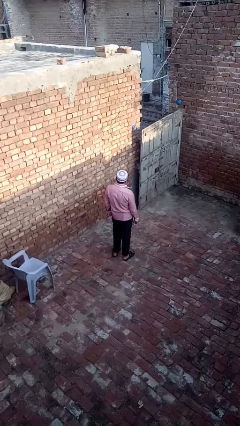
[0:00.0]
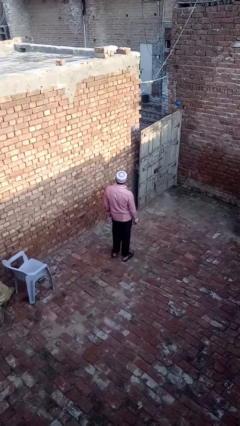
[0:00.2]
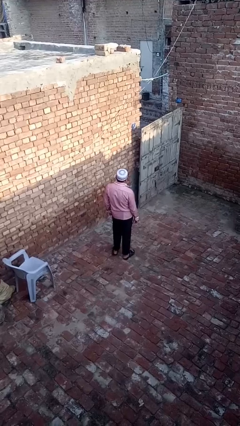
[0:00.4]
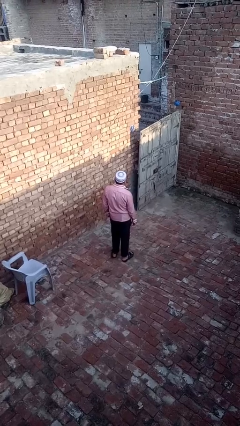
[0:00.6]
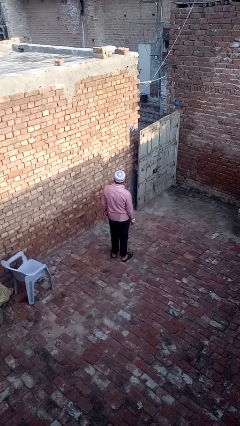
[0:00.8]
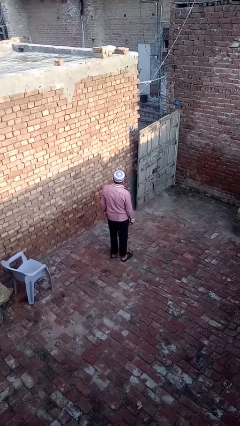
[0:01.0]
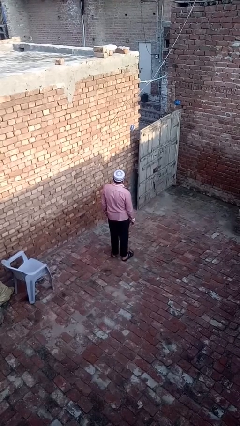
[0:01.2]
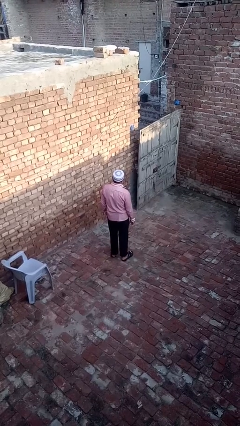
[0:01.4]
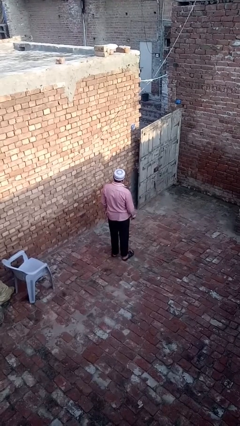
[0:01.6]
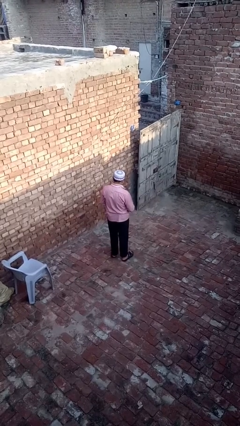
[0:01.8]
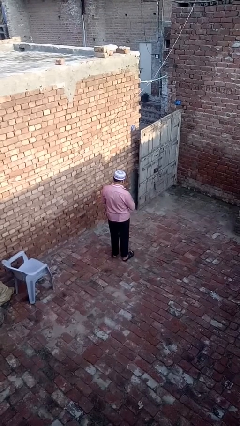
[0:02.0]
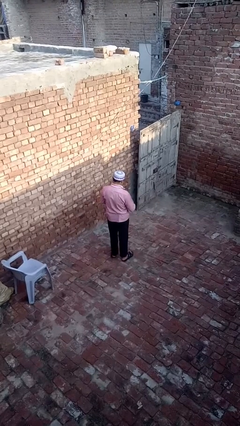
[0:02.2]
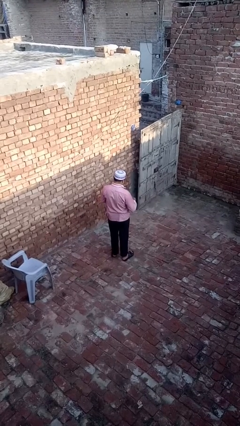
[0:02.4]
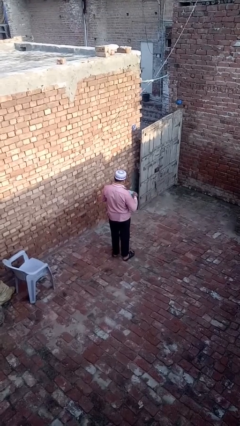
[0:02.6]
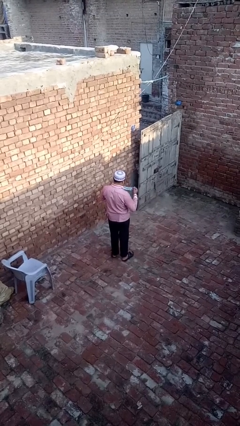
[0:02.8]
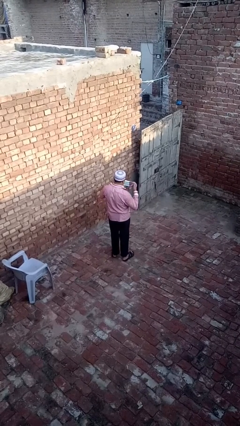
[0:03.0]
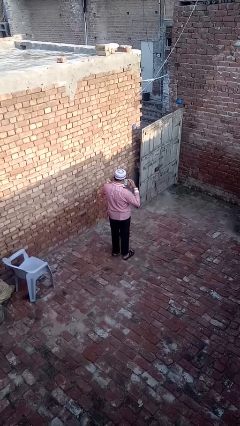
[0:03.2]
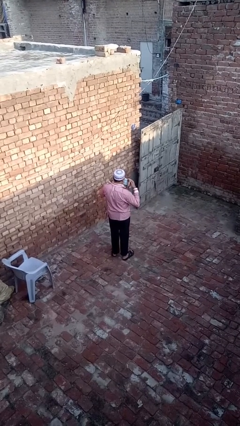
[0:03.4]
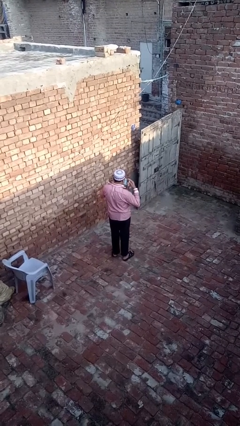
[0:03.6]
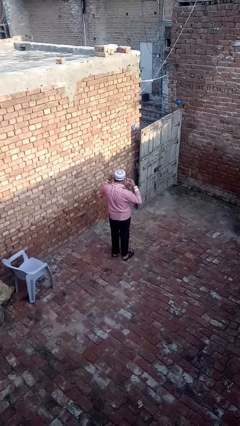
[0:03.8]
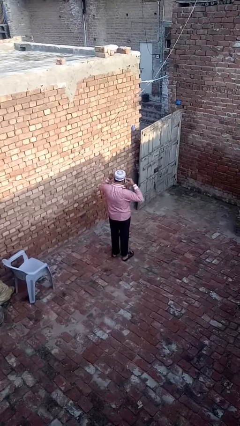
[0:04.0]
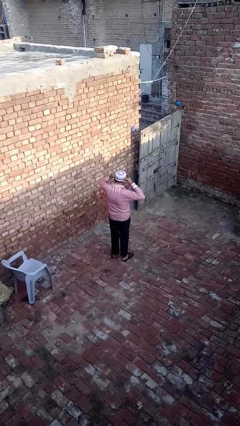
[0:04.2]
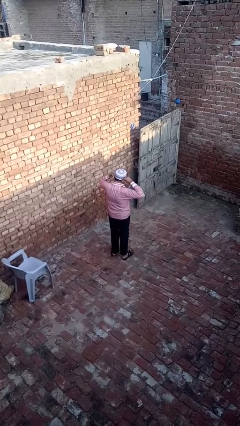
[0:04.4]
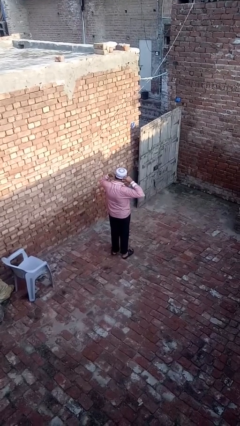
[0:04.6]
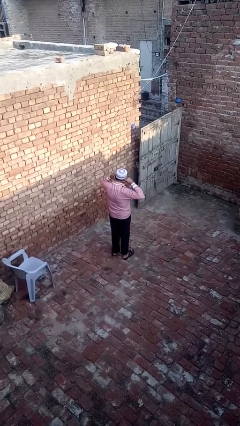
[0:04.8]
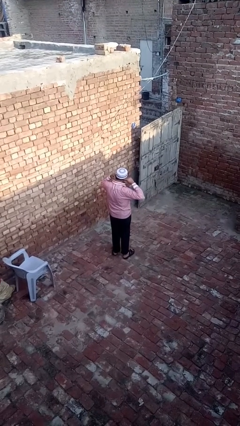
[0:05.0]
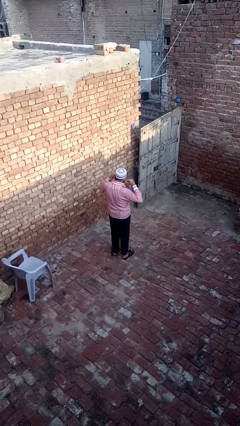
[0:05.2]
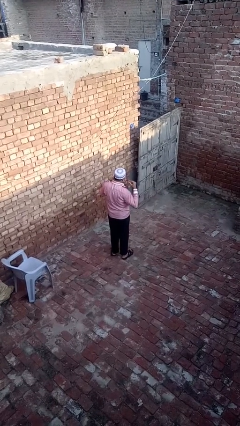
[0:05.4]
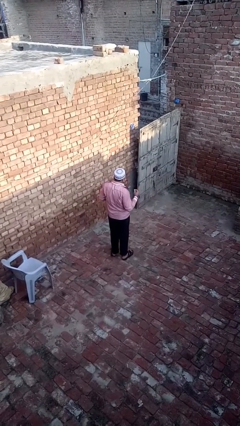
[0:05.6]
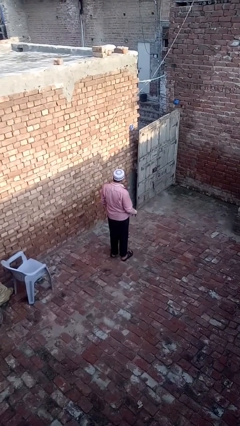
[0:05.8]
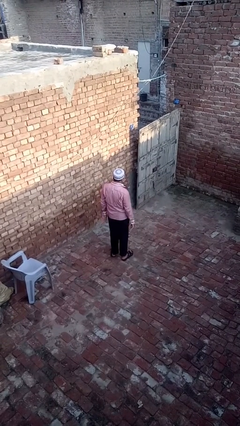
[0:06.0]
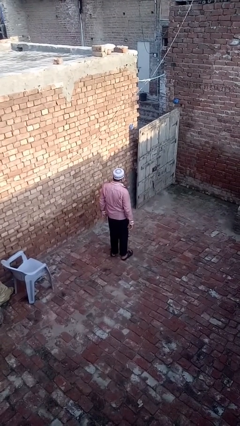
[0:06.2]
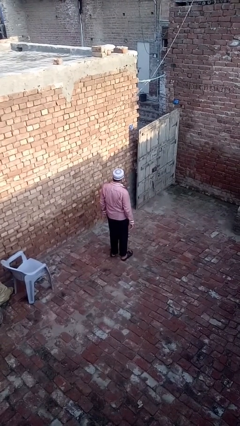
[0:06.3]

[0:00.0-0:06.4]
person puts on facemask

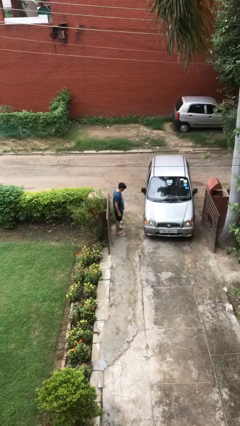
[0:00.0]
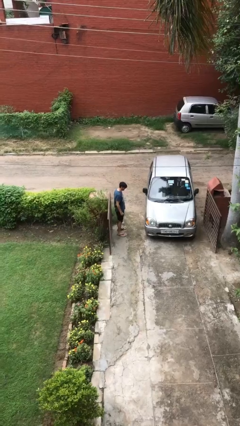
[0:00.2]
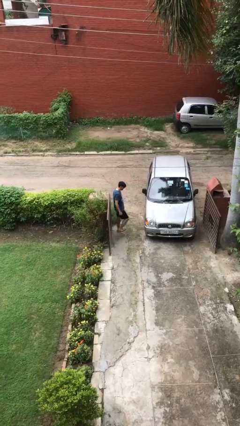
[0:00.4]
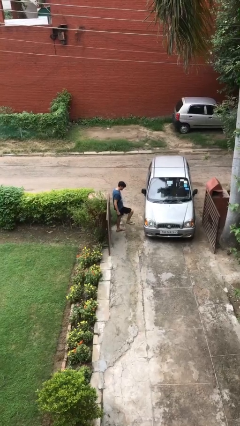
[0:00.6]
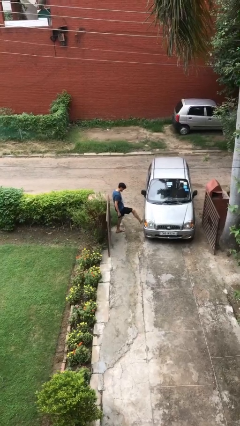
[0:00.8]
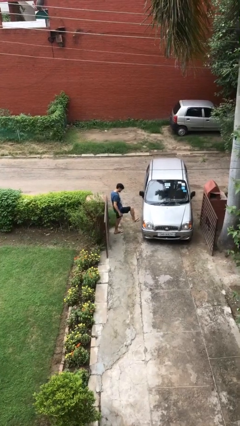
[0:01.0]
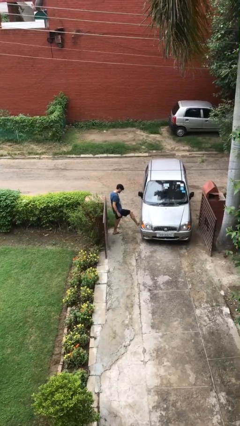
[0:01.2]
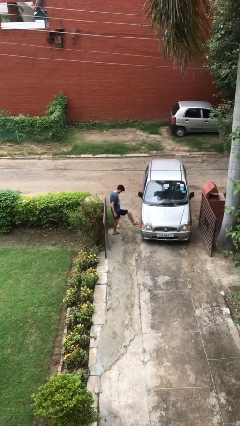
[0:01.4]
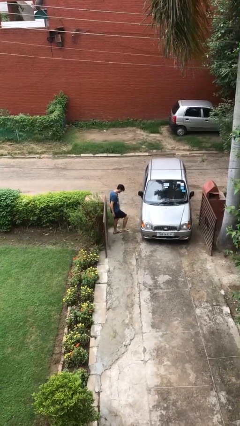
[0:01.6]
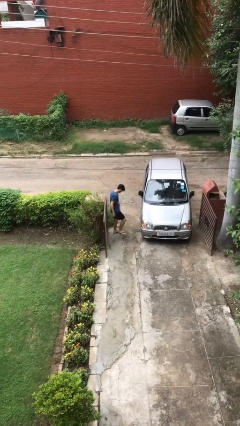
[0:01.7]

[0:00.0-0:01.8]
person kicks car tires

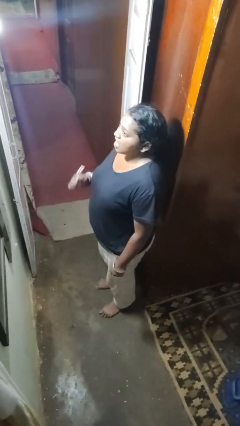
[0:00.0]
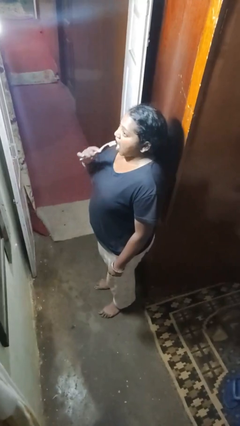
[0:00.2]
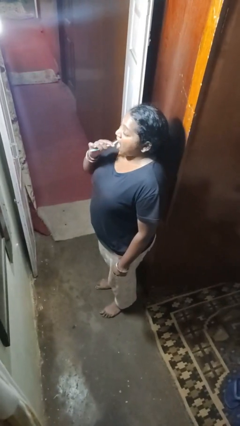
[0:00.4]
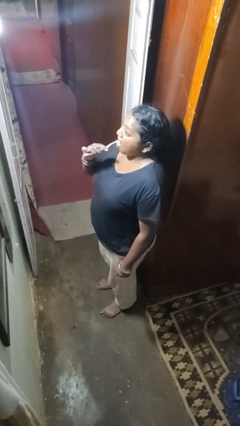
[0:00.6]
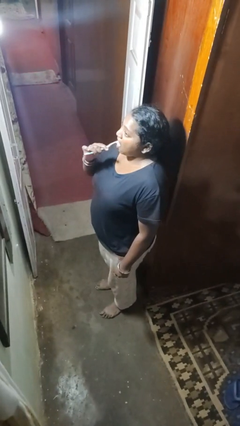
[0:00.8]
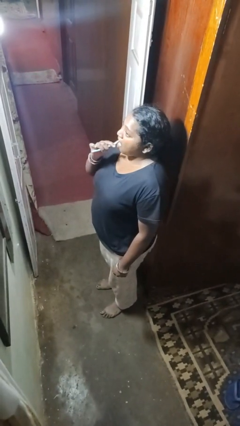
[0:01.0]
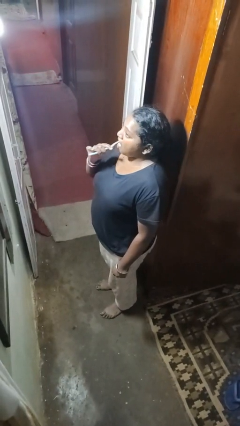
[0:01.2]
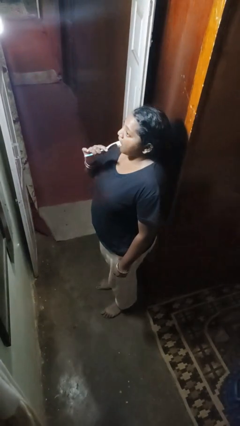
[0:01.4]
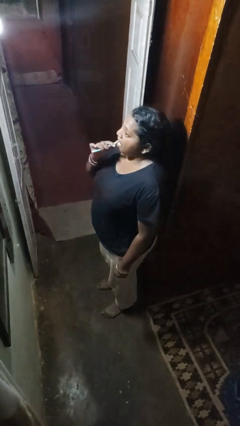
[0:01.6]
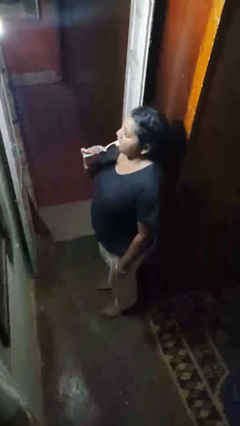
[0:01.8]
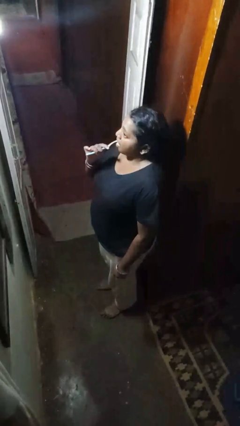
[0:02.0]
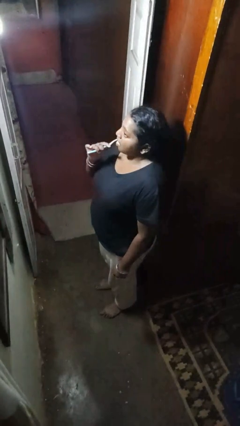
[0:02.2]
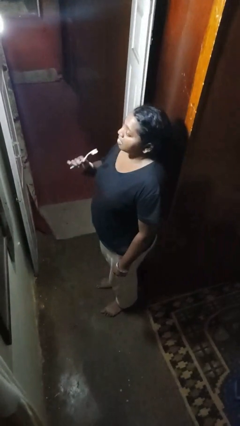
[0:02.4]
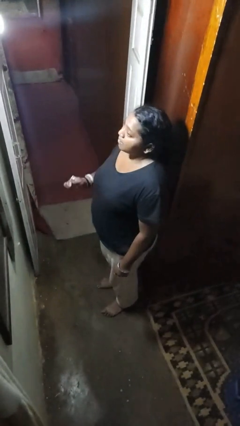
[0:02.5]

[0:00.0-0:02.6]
person brushes teeth

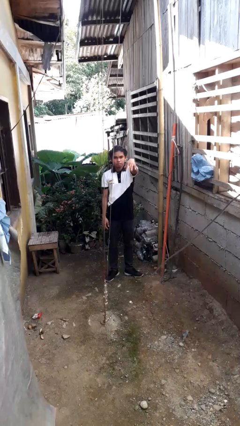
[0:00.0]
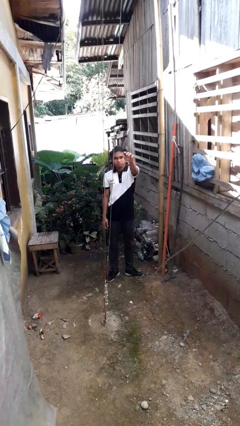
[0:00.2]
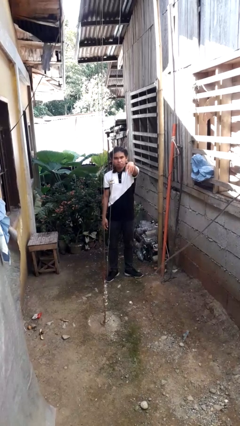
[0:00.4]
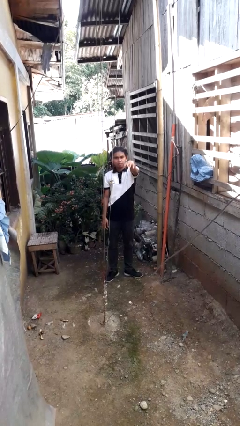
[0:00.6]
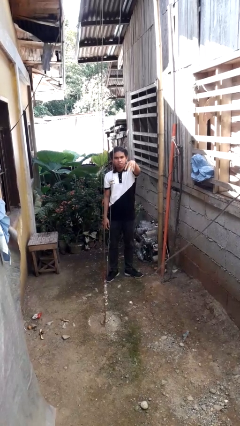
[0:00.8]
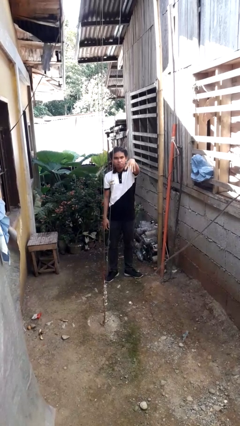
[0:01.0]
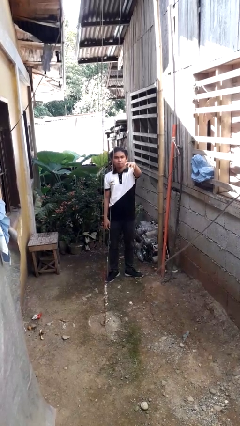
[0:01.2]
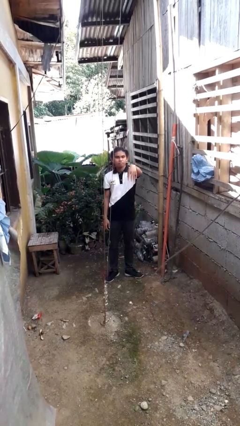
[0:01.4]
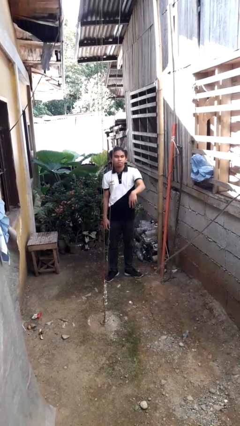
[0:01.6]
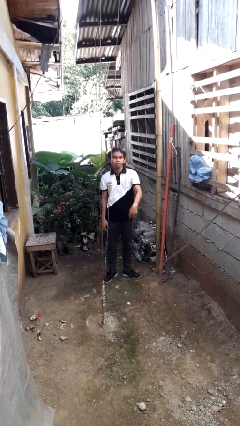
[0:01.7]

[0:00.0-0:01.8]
person gestures come here

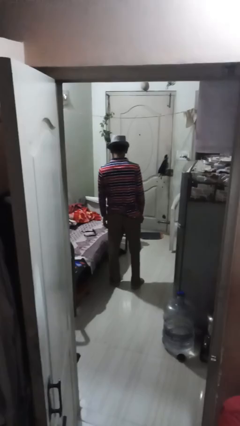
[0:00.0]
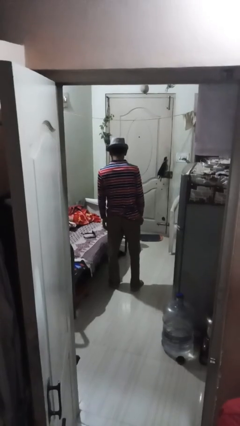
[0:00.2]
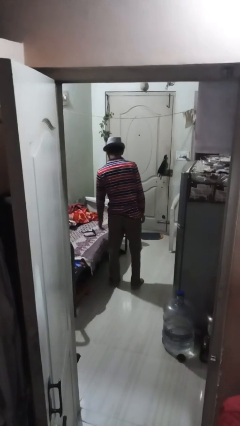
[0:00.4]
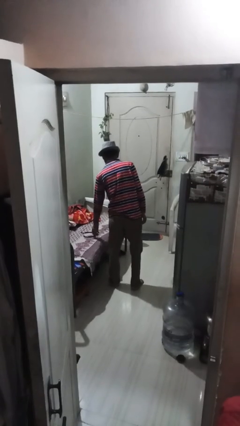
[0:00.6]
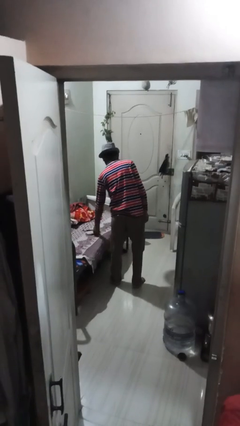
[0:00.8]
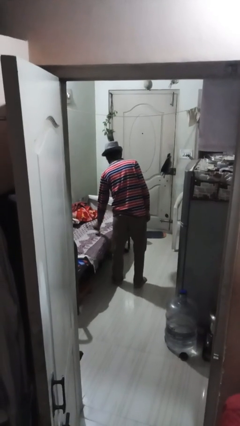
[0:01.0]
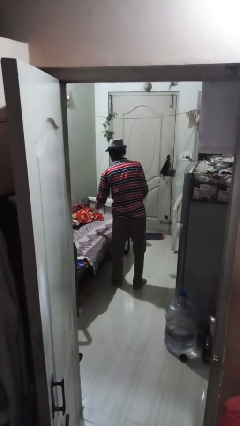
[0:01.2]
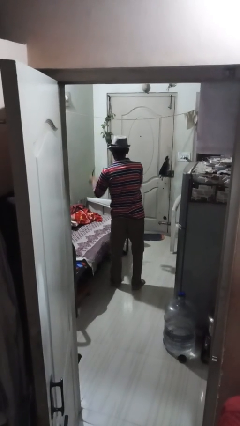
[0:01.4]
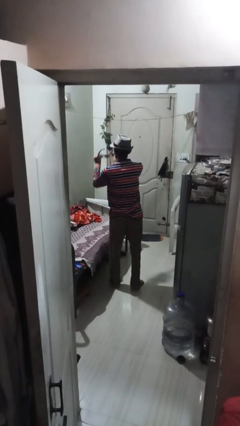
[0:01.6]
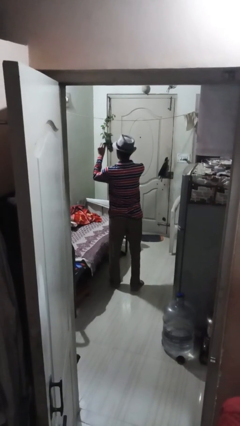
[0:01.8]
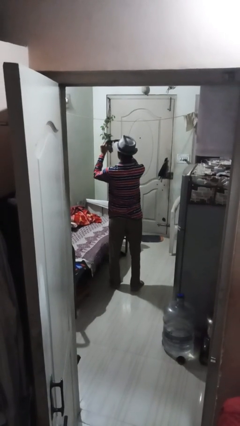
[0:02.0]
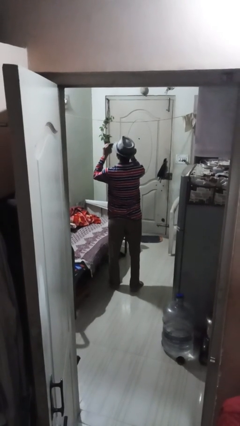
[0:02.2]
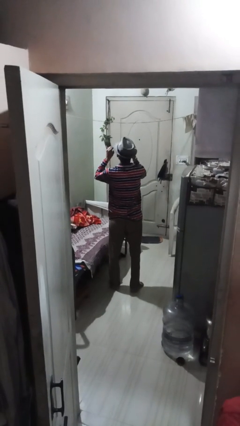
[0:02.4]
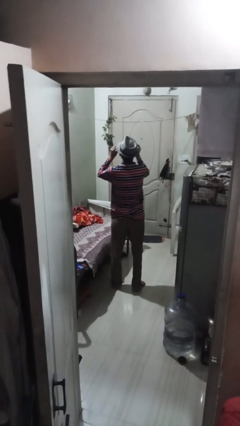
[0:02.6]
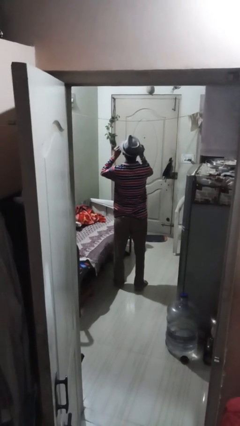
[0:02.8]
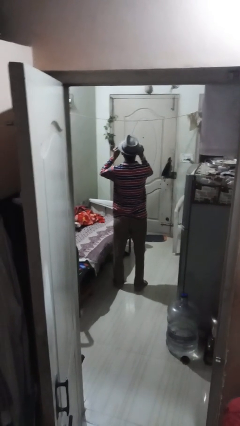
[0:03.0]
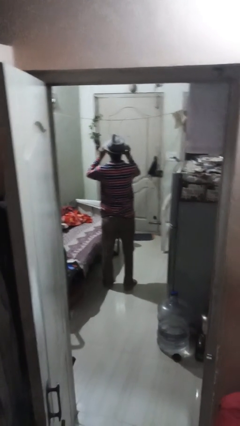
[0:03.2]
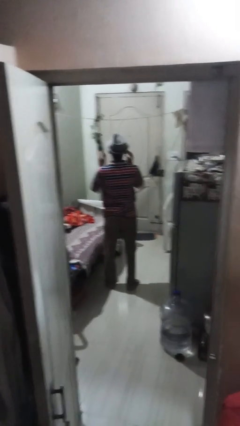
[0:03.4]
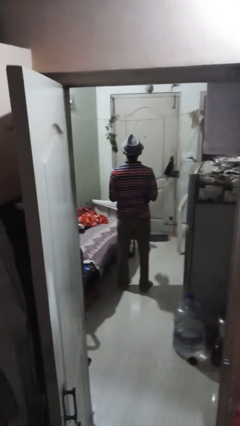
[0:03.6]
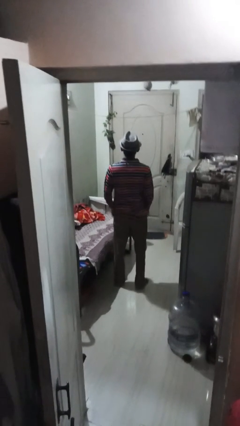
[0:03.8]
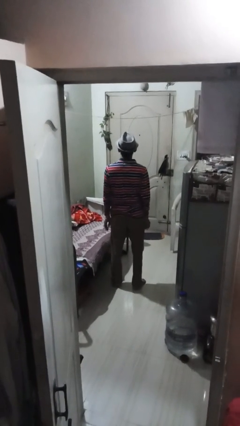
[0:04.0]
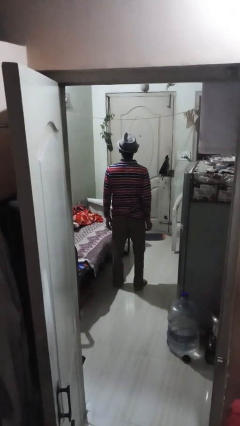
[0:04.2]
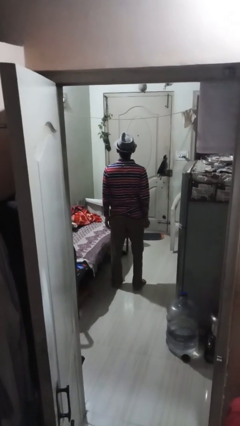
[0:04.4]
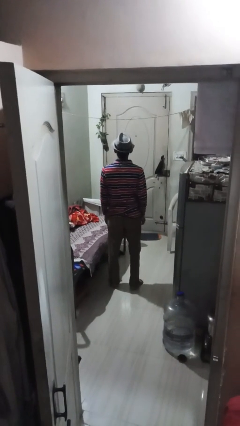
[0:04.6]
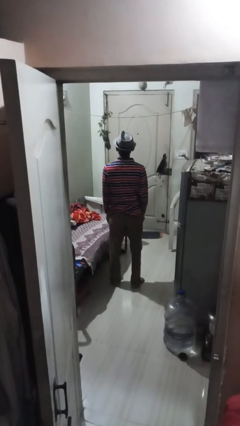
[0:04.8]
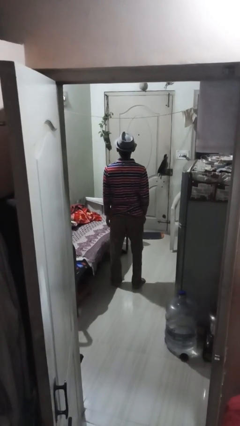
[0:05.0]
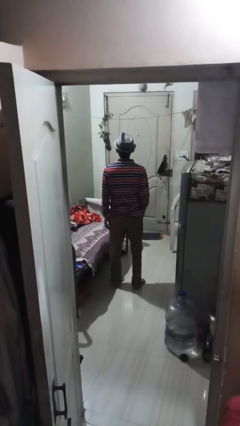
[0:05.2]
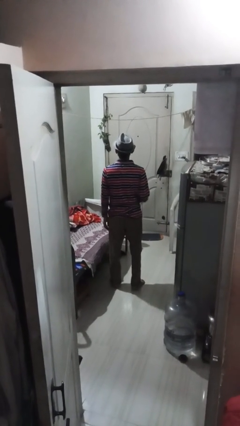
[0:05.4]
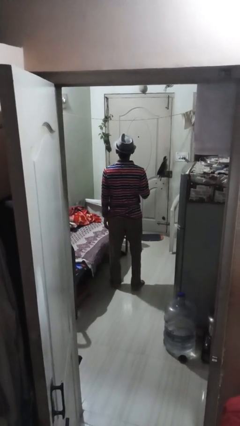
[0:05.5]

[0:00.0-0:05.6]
person puts on sunglasses
